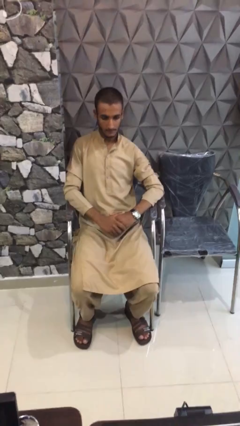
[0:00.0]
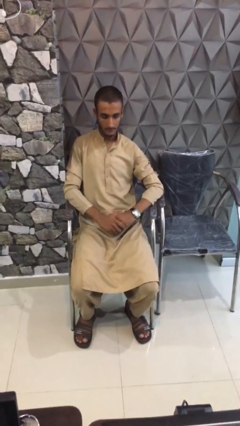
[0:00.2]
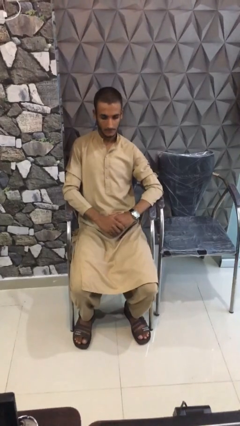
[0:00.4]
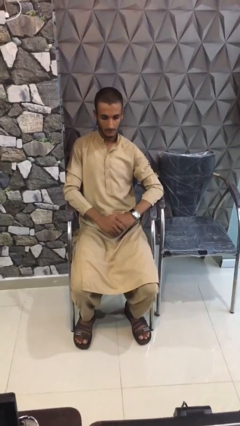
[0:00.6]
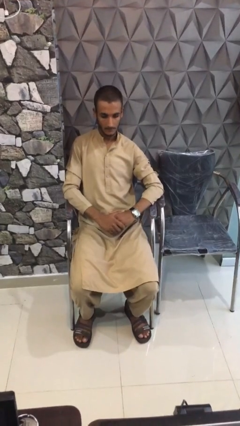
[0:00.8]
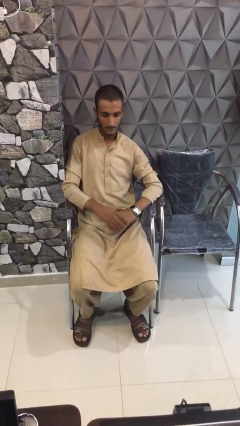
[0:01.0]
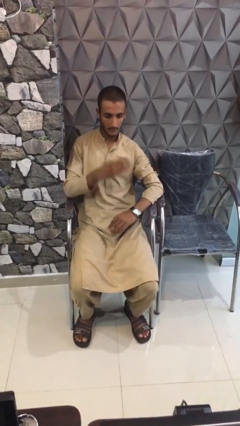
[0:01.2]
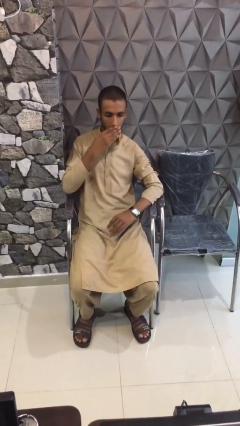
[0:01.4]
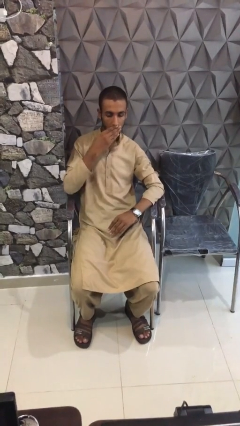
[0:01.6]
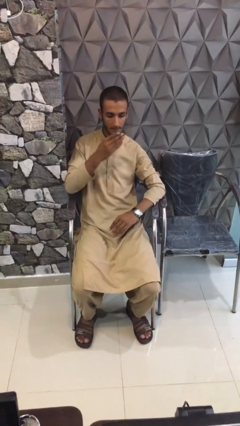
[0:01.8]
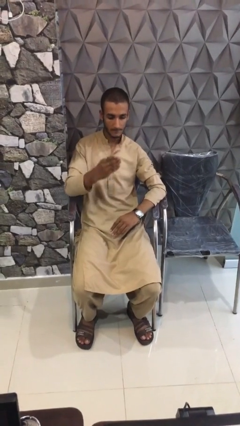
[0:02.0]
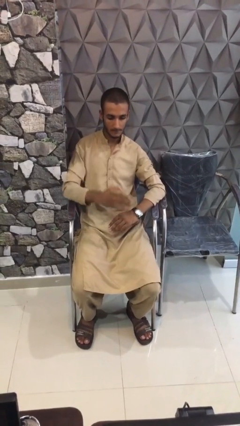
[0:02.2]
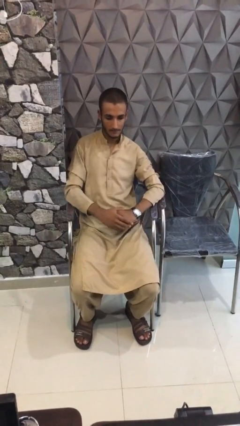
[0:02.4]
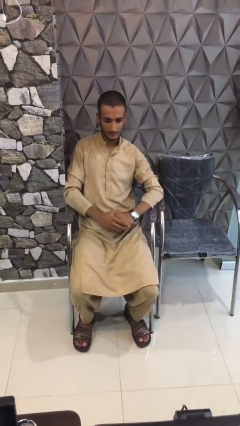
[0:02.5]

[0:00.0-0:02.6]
person gestures blow kiss

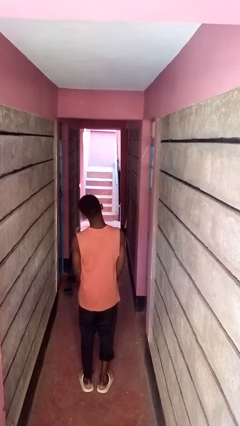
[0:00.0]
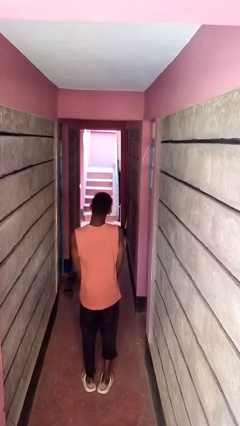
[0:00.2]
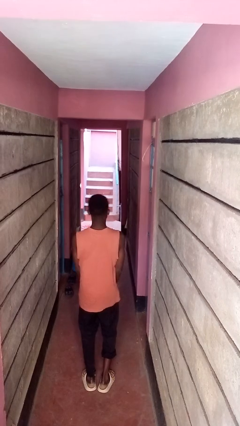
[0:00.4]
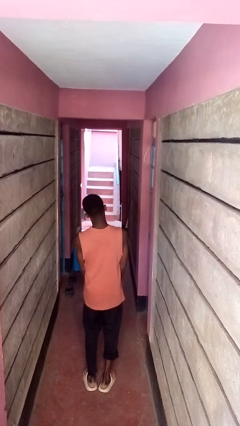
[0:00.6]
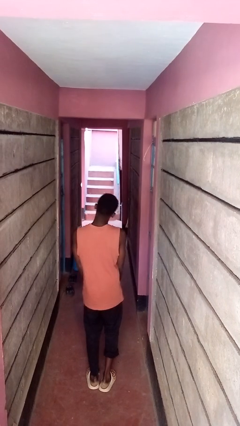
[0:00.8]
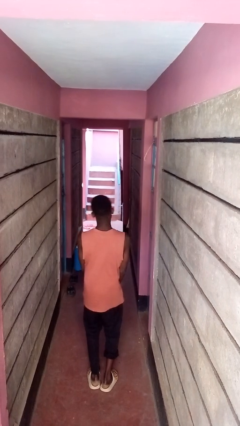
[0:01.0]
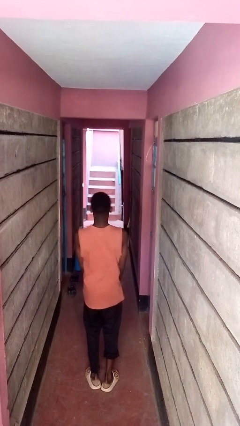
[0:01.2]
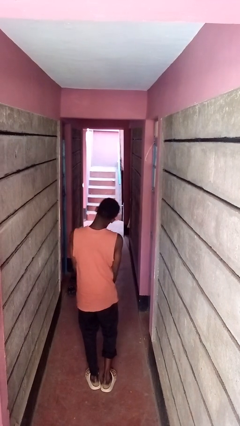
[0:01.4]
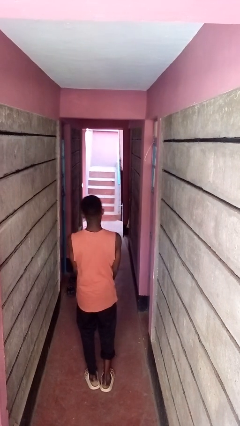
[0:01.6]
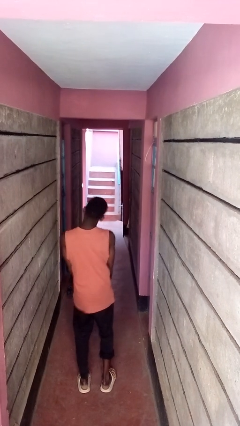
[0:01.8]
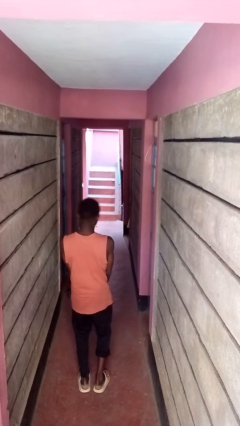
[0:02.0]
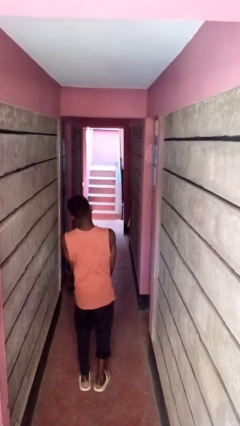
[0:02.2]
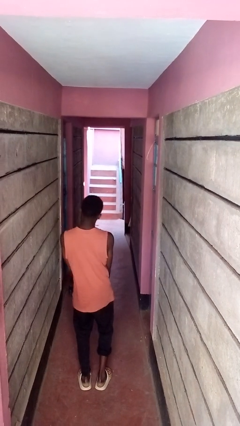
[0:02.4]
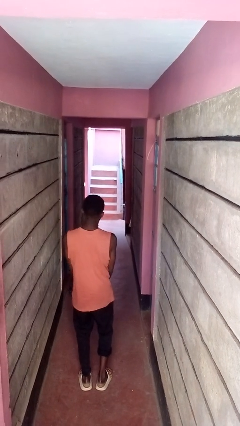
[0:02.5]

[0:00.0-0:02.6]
person dances in place

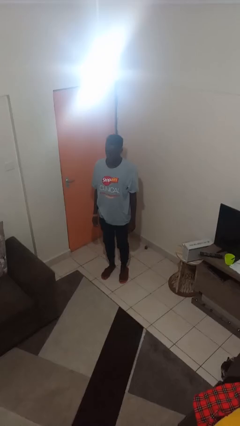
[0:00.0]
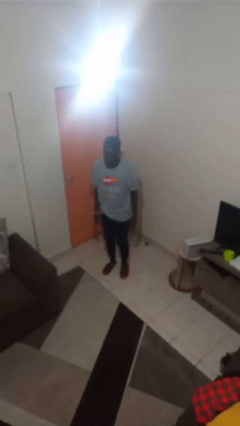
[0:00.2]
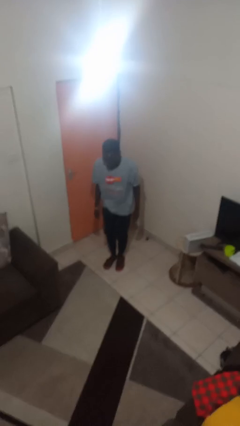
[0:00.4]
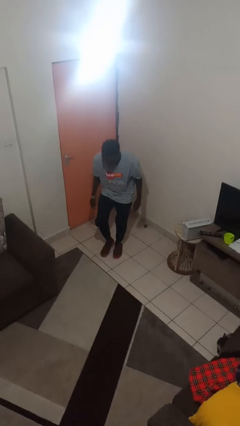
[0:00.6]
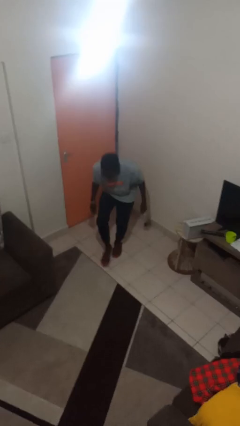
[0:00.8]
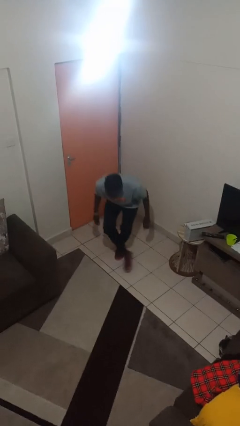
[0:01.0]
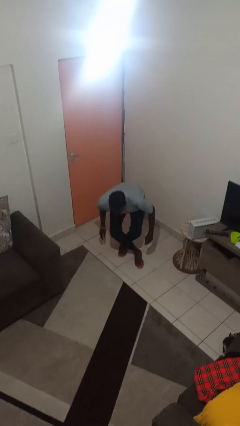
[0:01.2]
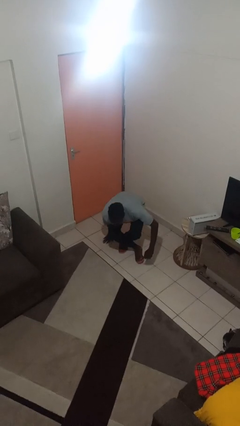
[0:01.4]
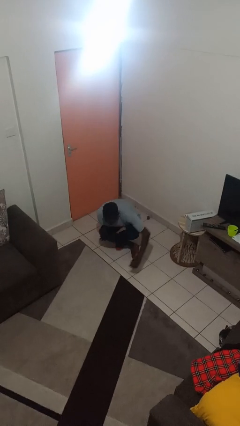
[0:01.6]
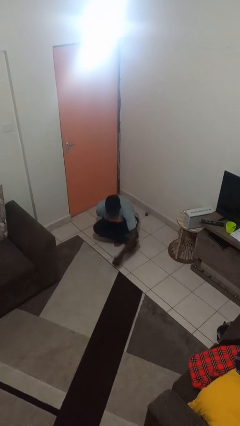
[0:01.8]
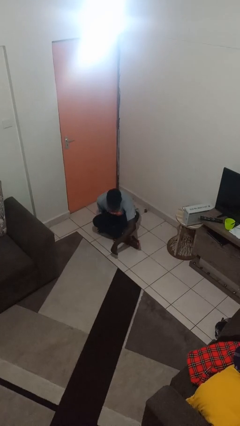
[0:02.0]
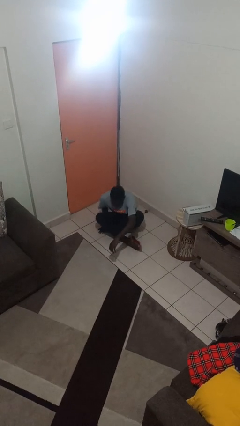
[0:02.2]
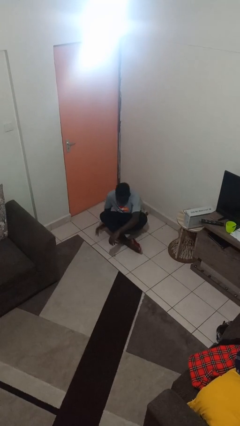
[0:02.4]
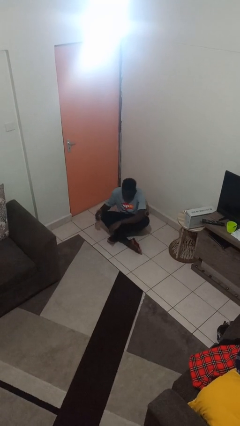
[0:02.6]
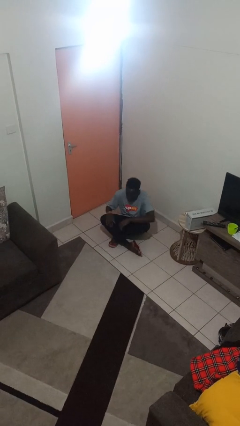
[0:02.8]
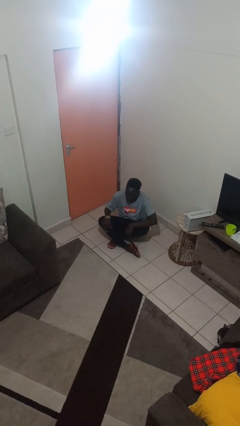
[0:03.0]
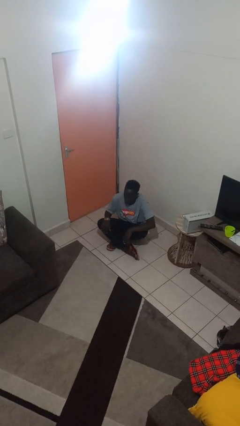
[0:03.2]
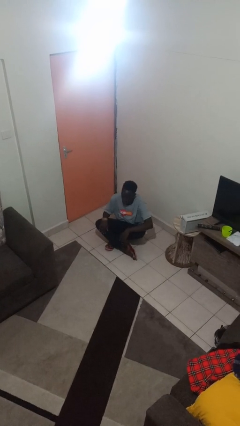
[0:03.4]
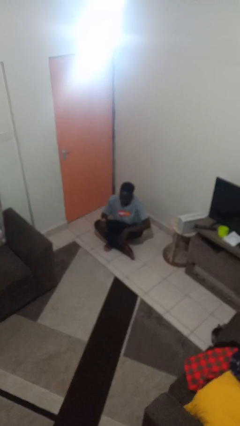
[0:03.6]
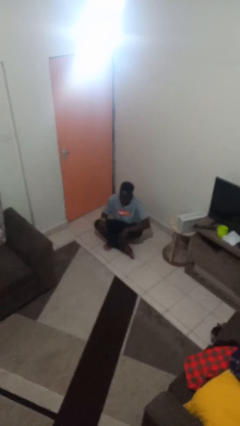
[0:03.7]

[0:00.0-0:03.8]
person sits crisscross

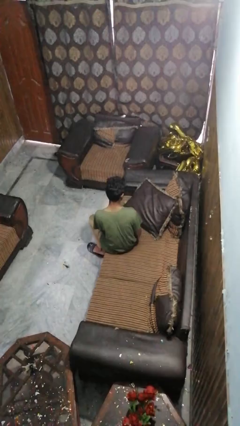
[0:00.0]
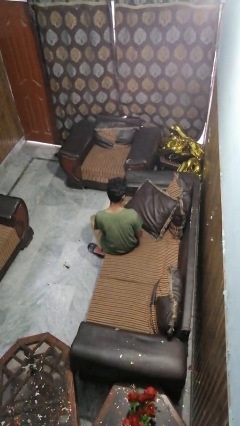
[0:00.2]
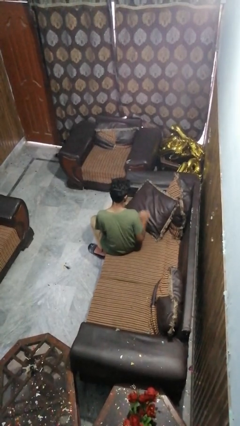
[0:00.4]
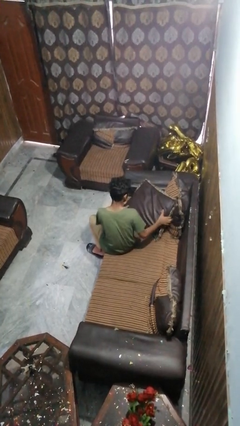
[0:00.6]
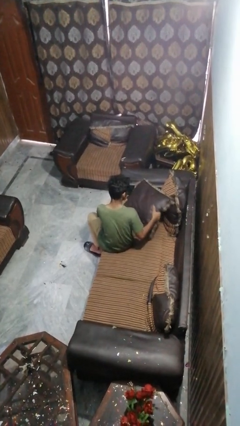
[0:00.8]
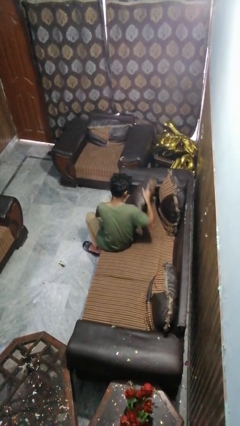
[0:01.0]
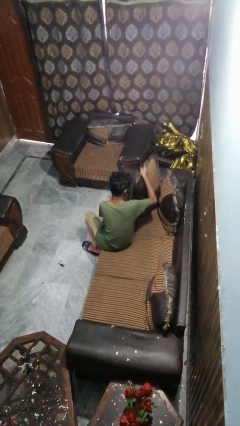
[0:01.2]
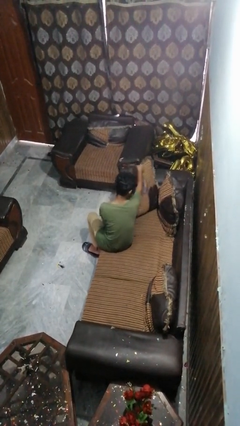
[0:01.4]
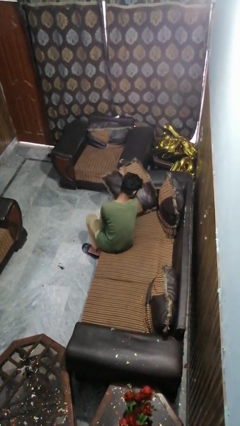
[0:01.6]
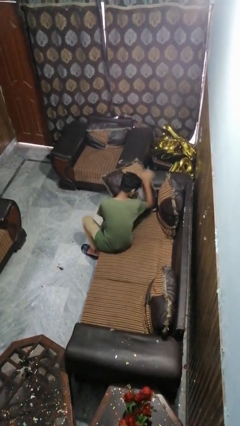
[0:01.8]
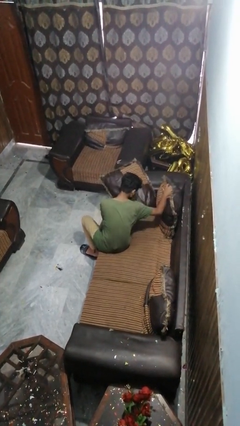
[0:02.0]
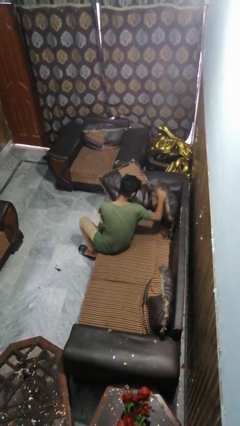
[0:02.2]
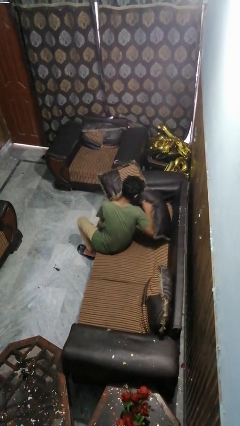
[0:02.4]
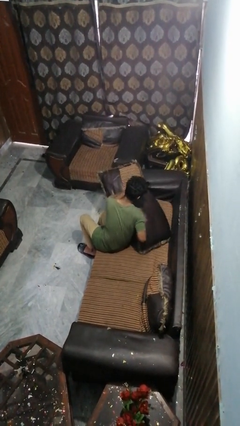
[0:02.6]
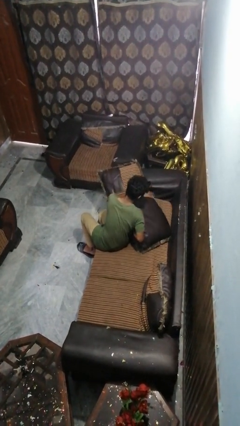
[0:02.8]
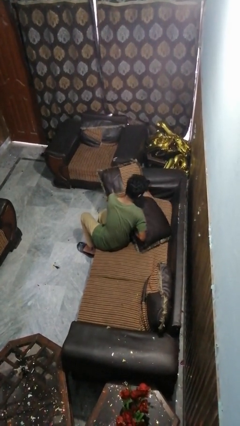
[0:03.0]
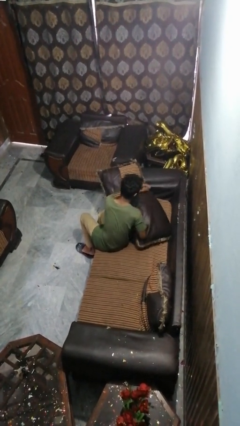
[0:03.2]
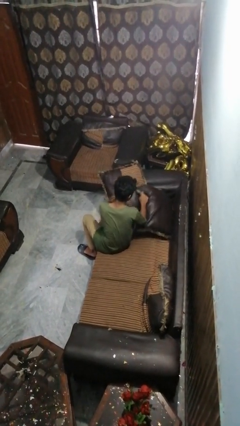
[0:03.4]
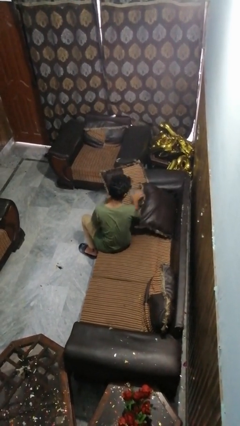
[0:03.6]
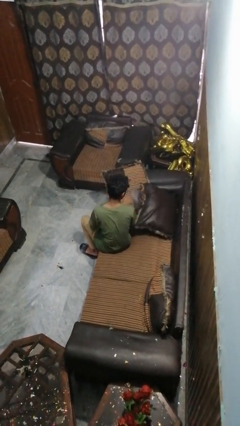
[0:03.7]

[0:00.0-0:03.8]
person searches in couch

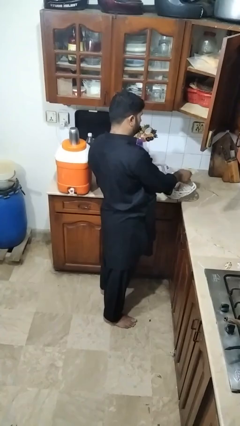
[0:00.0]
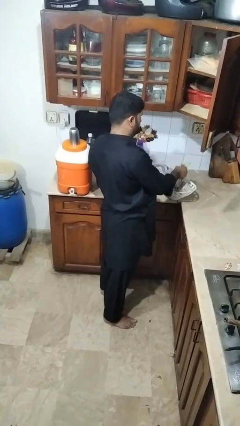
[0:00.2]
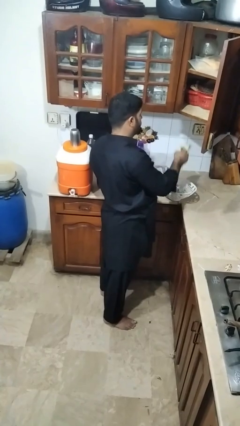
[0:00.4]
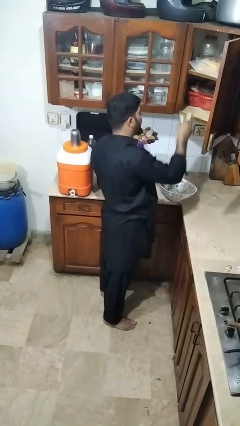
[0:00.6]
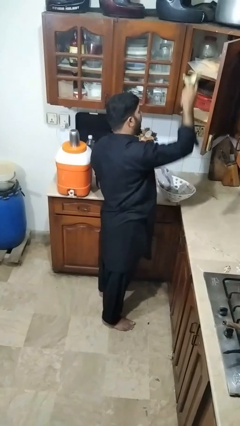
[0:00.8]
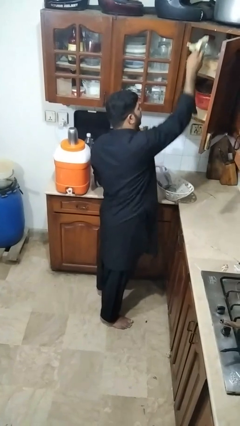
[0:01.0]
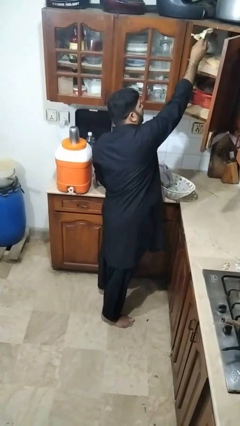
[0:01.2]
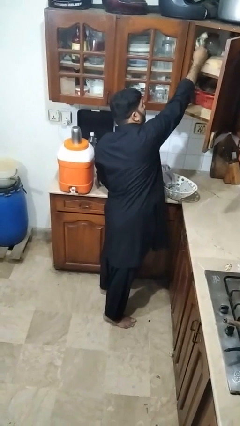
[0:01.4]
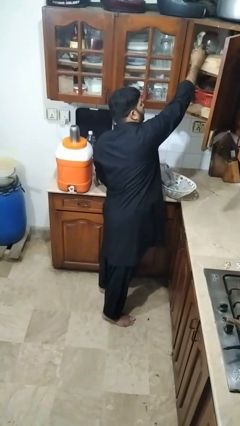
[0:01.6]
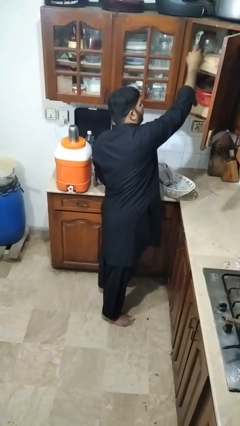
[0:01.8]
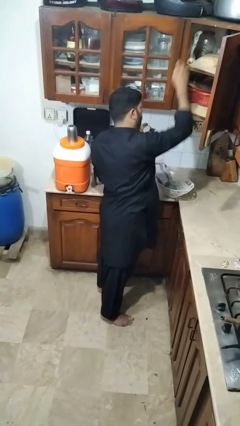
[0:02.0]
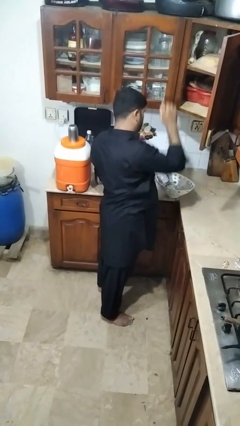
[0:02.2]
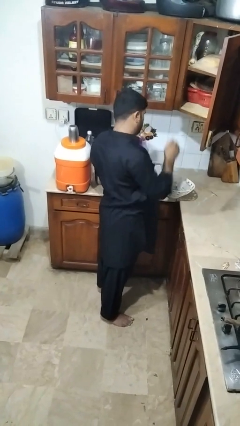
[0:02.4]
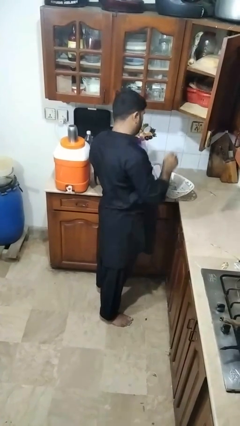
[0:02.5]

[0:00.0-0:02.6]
person loads groceries into cabinet

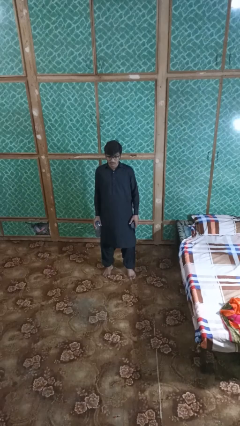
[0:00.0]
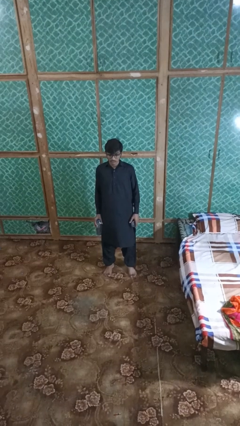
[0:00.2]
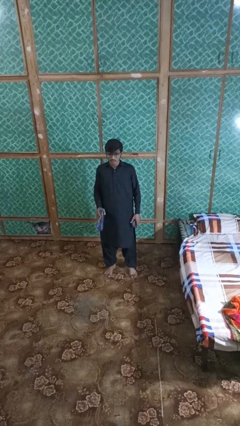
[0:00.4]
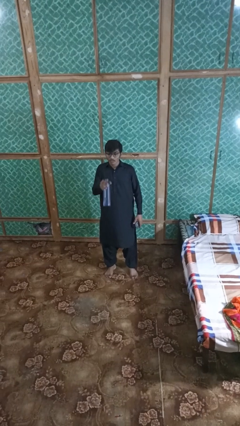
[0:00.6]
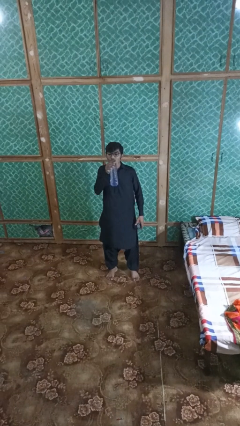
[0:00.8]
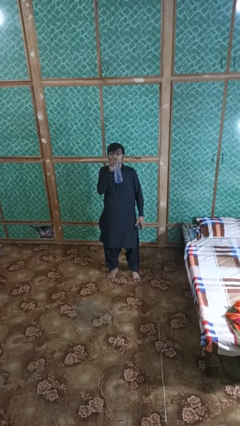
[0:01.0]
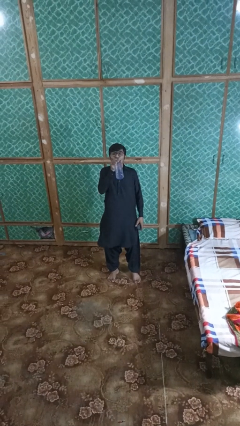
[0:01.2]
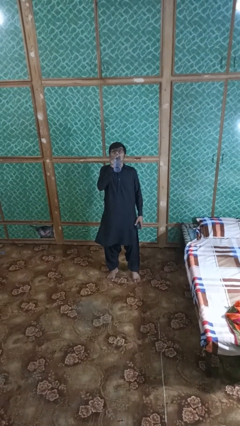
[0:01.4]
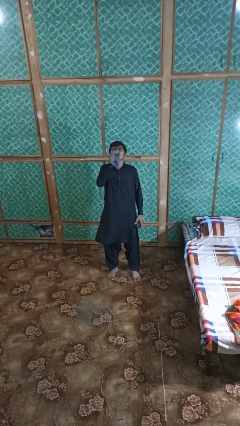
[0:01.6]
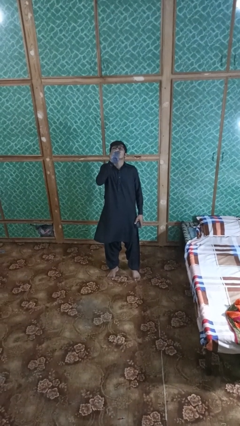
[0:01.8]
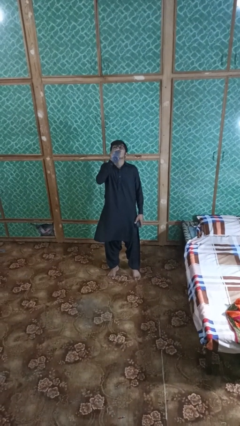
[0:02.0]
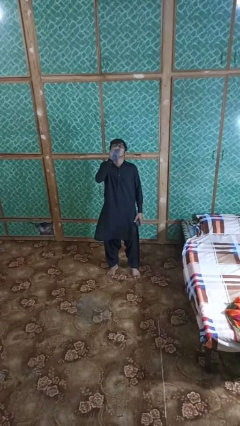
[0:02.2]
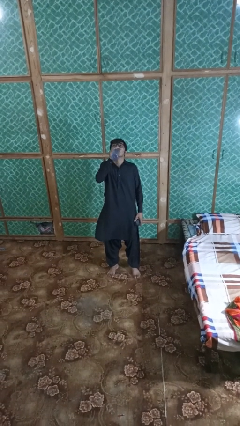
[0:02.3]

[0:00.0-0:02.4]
person drinks from bottle
